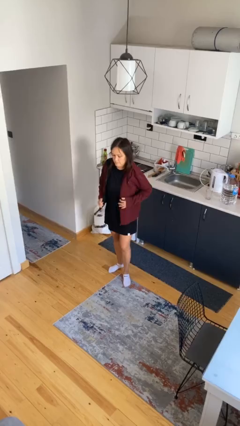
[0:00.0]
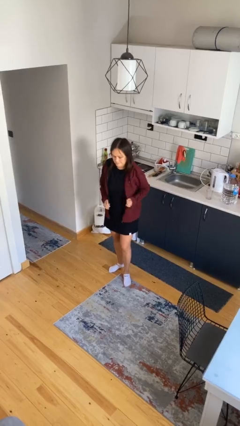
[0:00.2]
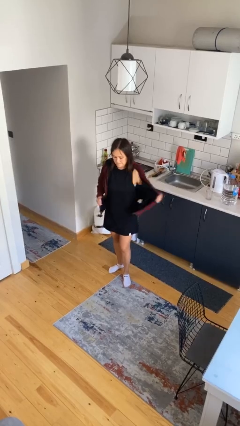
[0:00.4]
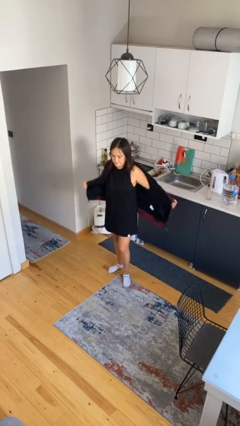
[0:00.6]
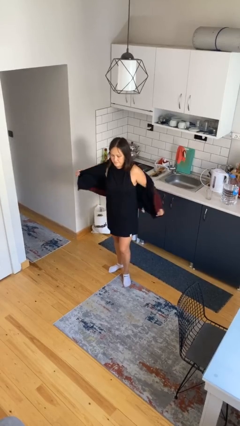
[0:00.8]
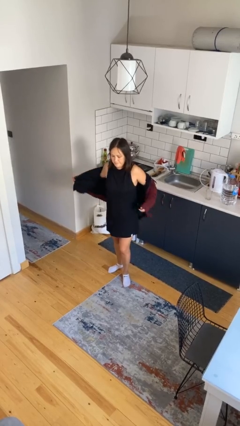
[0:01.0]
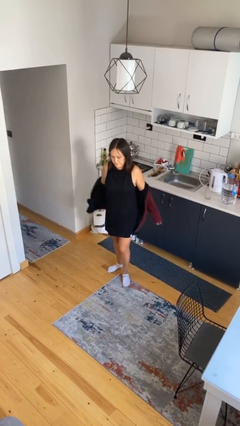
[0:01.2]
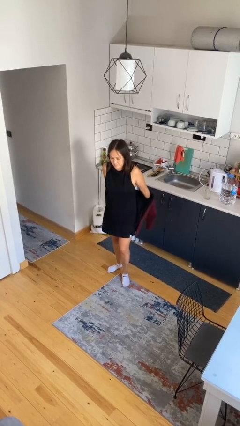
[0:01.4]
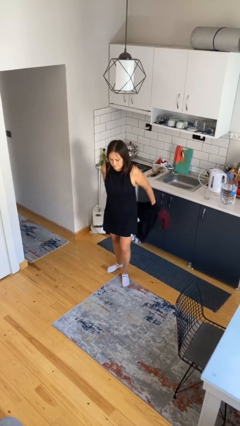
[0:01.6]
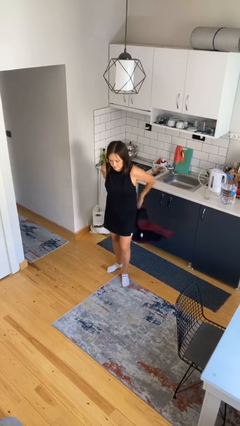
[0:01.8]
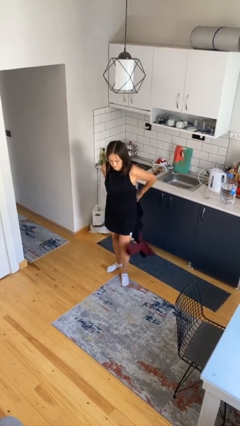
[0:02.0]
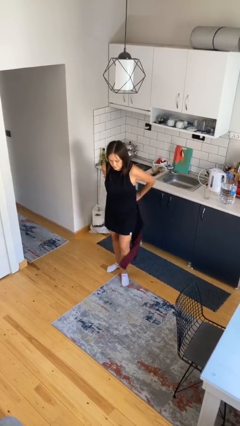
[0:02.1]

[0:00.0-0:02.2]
person takes off jacket

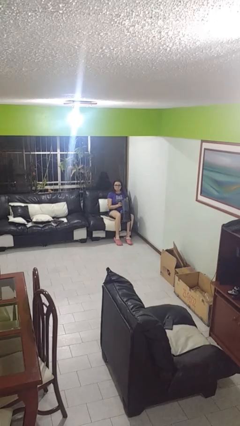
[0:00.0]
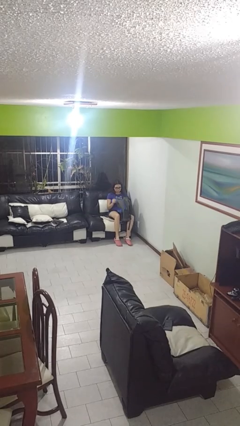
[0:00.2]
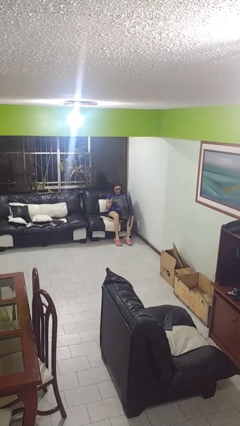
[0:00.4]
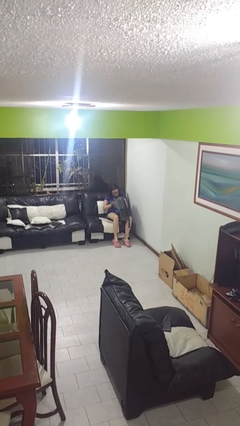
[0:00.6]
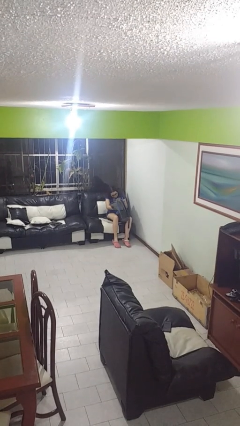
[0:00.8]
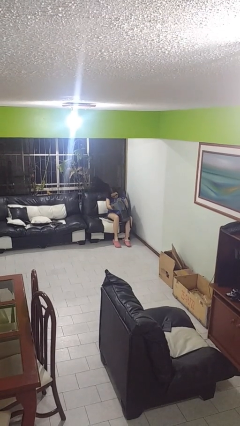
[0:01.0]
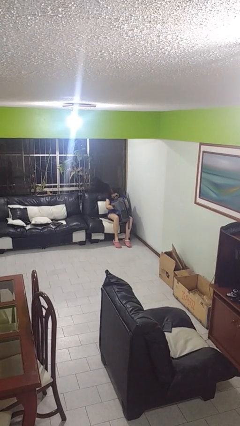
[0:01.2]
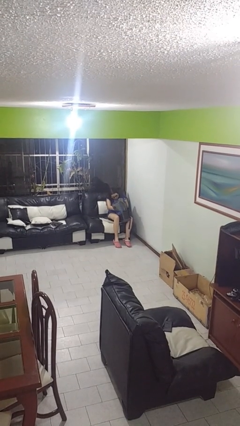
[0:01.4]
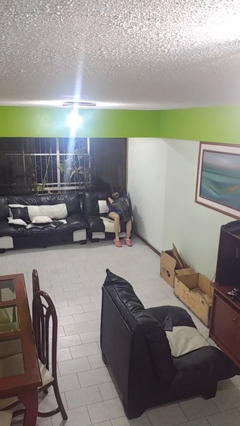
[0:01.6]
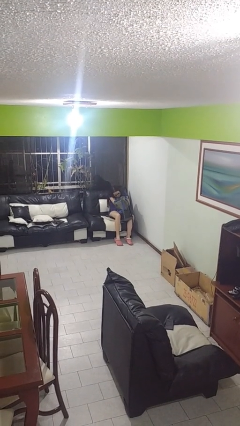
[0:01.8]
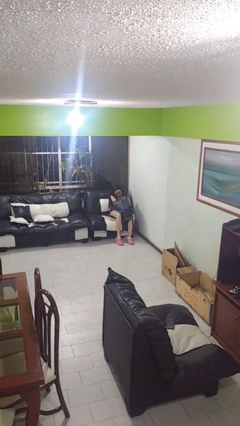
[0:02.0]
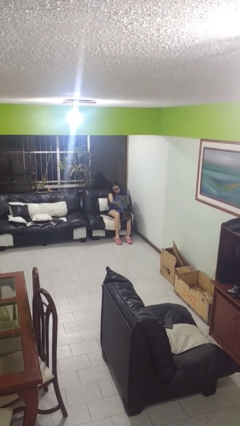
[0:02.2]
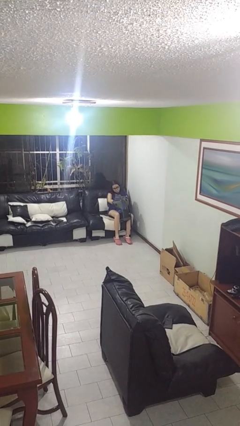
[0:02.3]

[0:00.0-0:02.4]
person searches in backpack

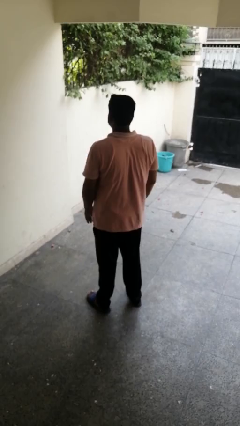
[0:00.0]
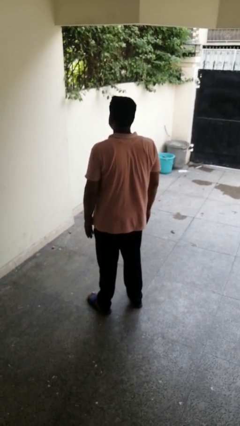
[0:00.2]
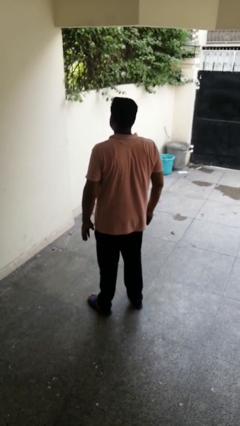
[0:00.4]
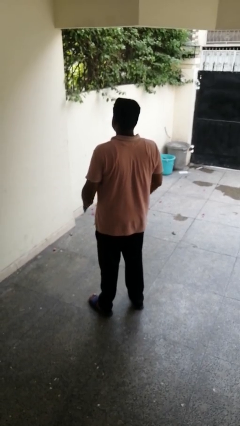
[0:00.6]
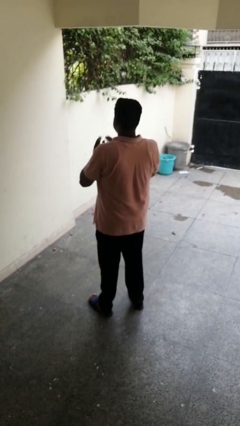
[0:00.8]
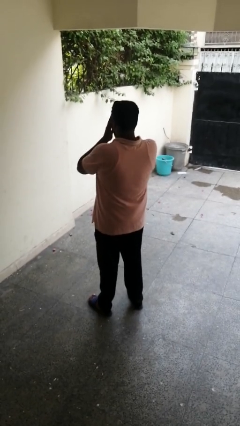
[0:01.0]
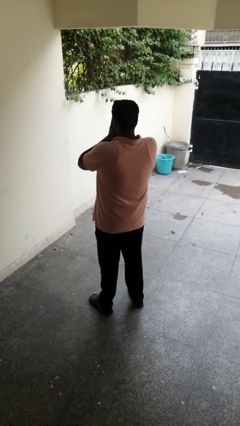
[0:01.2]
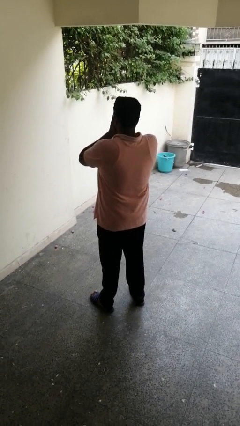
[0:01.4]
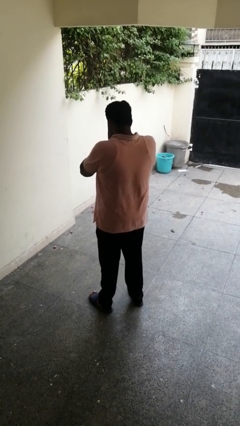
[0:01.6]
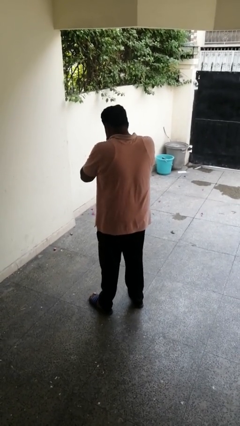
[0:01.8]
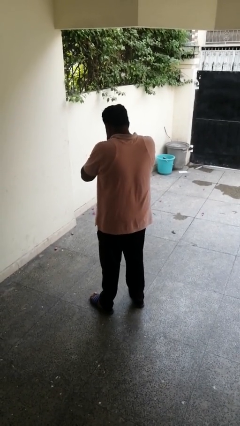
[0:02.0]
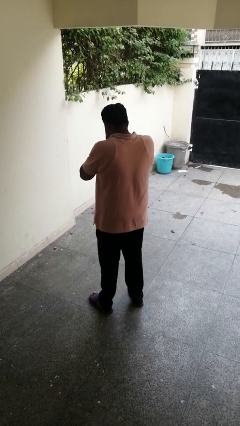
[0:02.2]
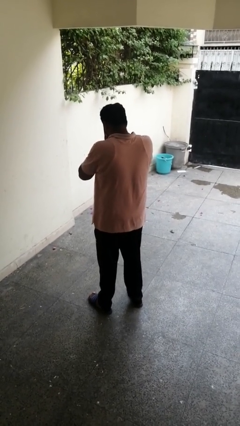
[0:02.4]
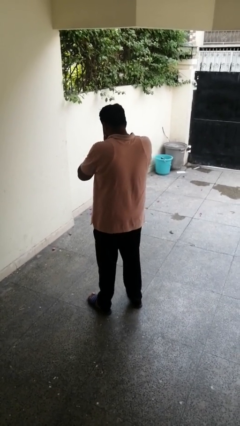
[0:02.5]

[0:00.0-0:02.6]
person sneezes into hand

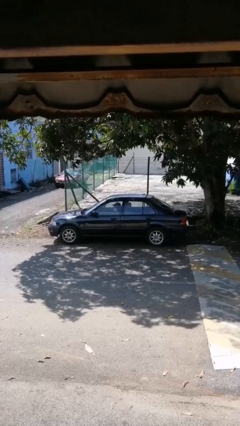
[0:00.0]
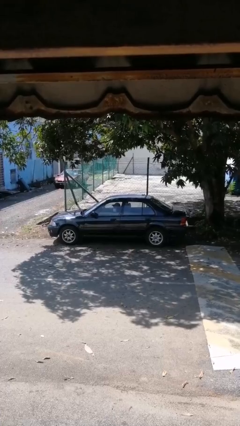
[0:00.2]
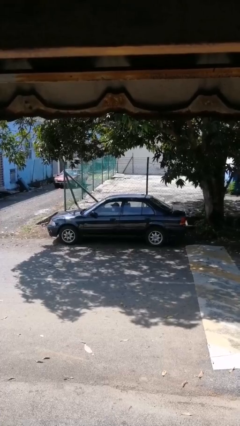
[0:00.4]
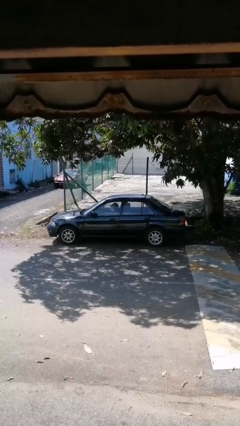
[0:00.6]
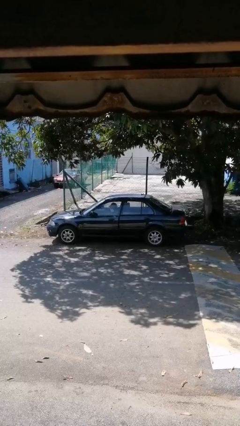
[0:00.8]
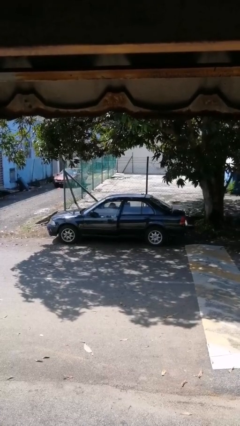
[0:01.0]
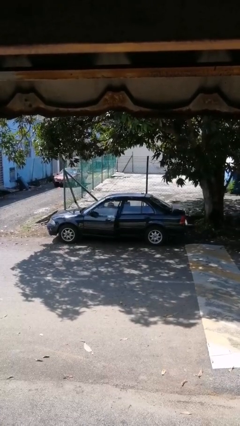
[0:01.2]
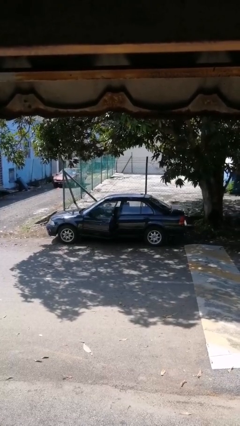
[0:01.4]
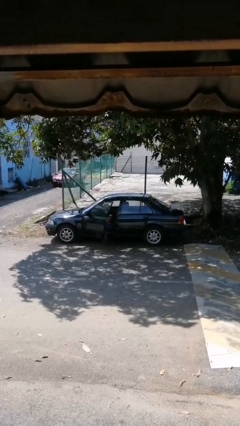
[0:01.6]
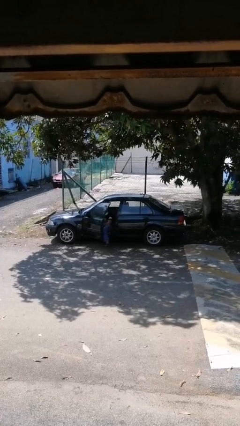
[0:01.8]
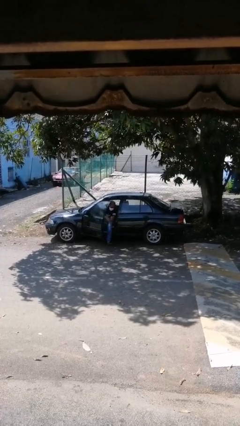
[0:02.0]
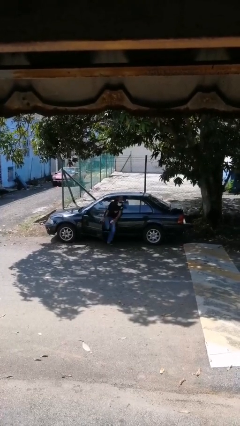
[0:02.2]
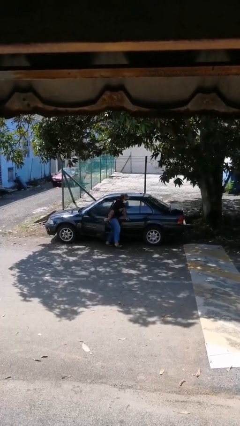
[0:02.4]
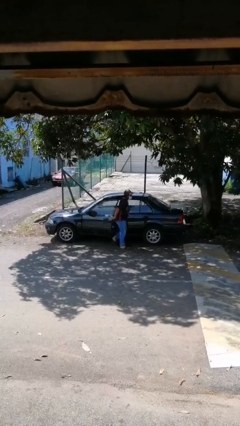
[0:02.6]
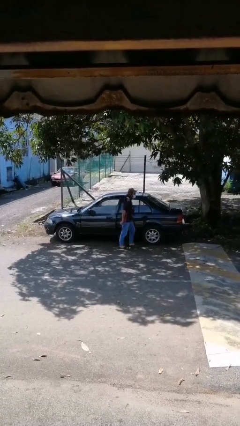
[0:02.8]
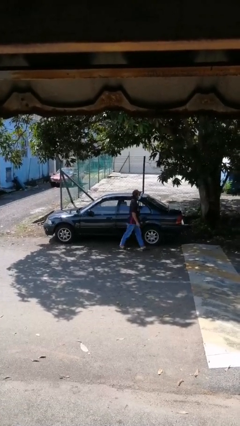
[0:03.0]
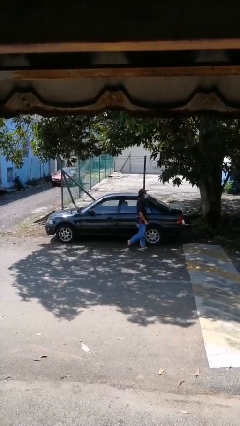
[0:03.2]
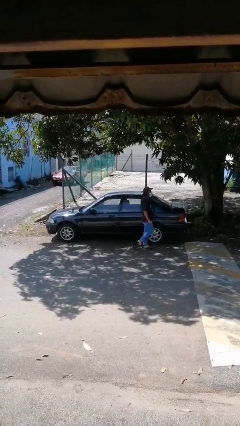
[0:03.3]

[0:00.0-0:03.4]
car drops off person

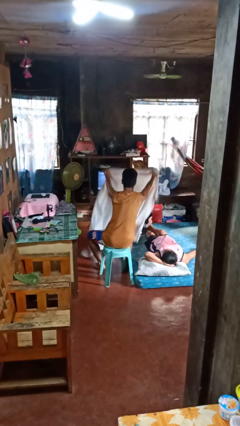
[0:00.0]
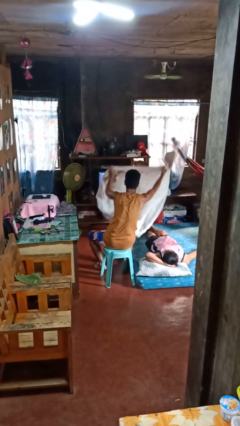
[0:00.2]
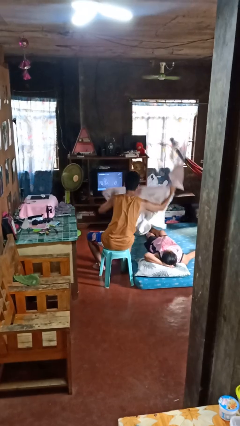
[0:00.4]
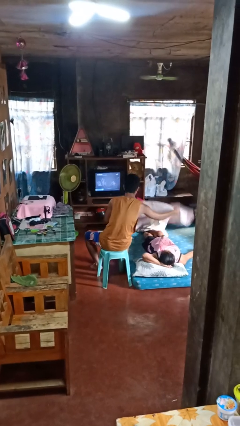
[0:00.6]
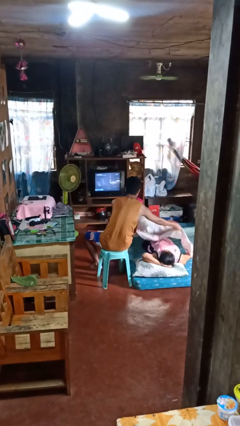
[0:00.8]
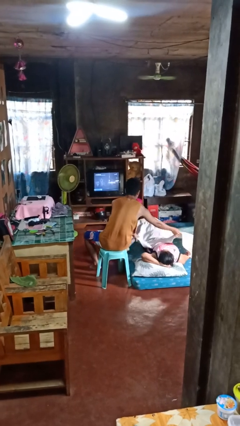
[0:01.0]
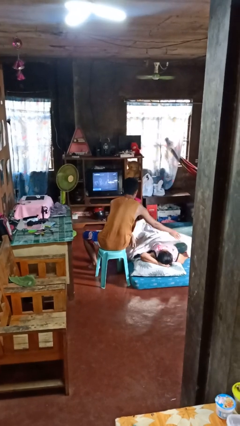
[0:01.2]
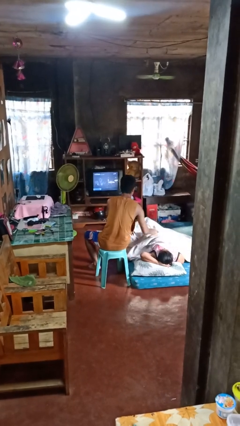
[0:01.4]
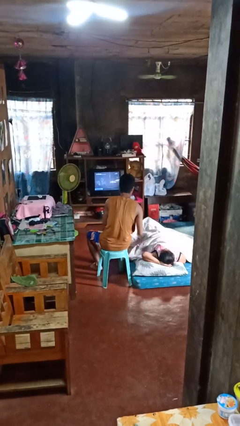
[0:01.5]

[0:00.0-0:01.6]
person covers friend with blanket

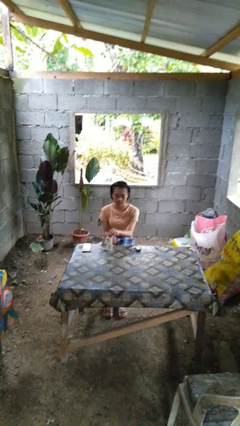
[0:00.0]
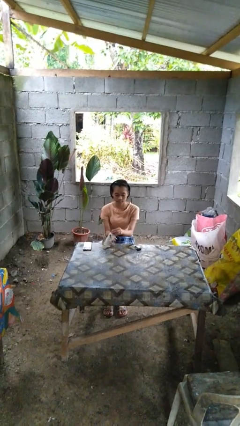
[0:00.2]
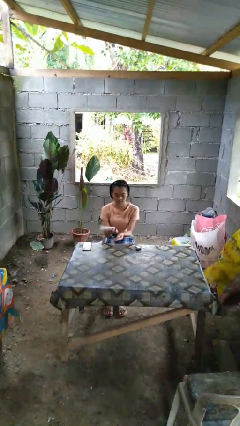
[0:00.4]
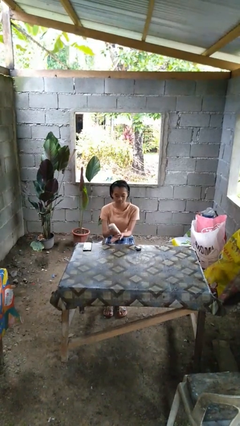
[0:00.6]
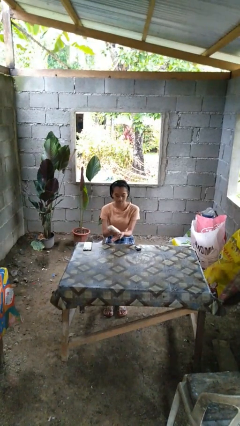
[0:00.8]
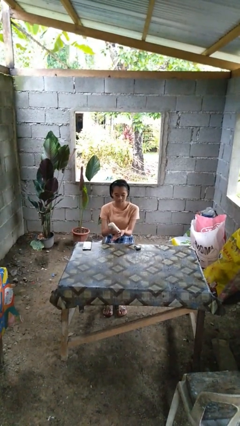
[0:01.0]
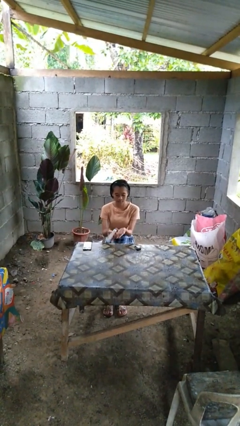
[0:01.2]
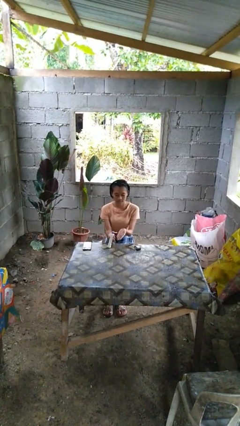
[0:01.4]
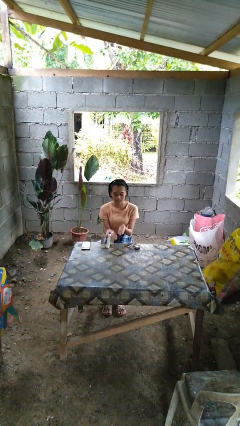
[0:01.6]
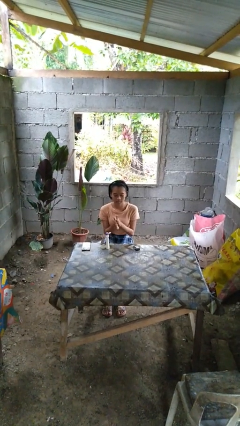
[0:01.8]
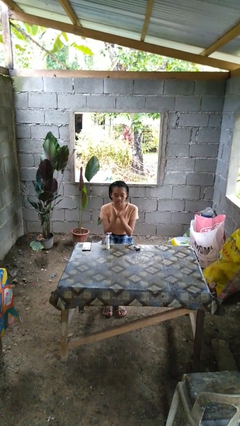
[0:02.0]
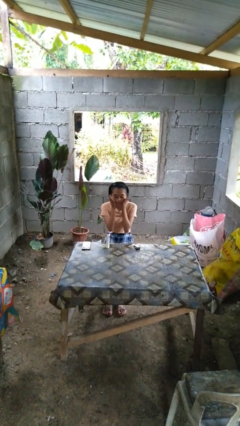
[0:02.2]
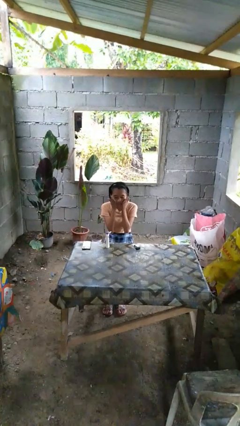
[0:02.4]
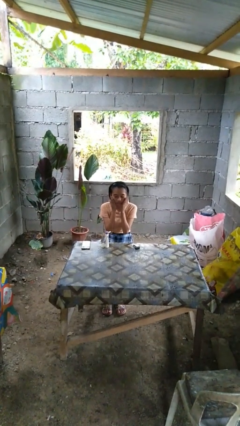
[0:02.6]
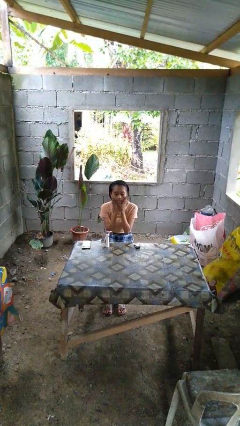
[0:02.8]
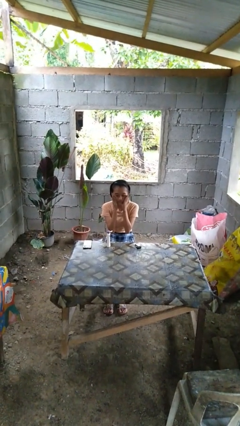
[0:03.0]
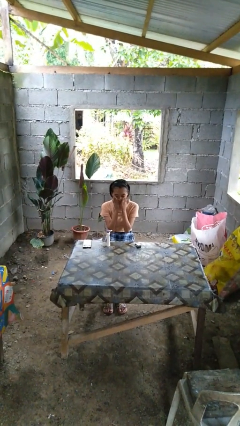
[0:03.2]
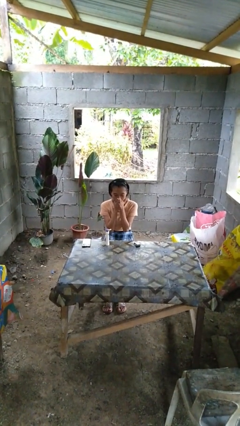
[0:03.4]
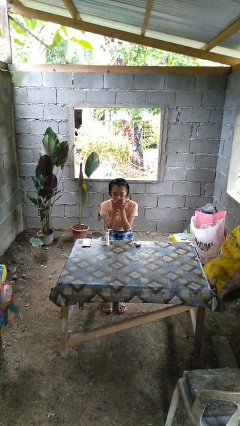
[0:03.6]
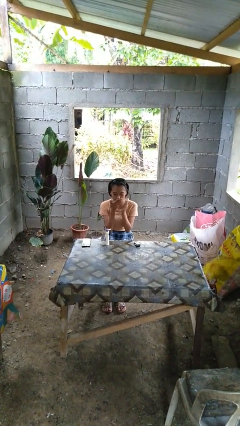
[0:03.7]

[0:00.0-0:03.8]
person applies shaving cream

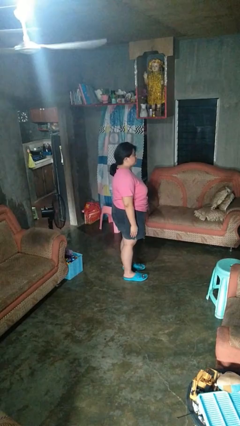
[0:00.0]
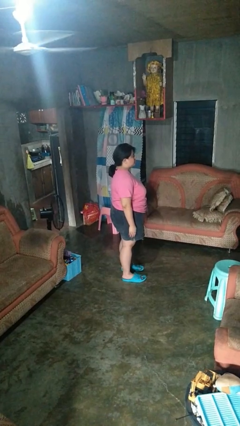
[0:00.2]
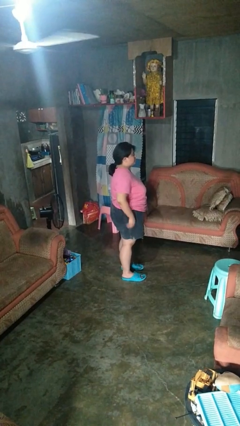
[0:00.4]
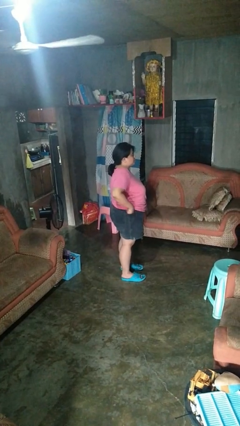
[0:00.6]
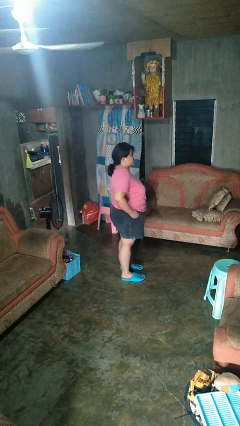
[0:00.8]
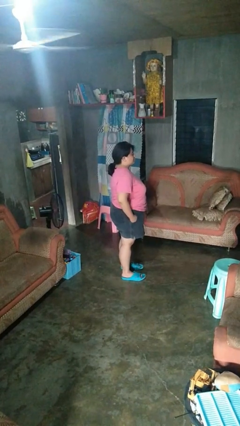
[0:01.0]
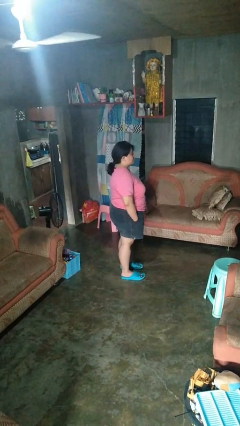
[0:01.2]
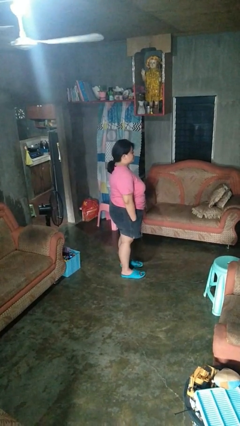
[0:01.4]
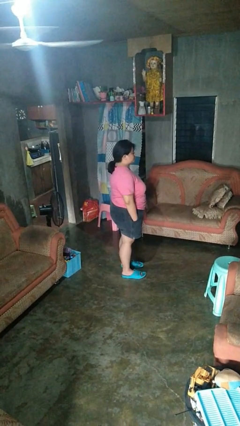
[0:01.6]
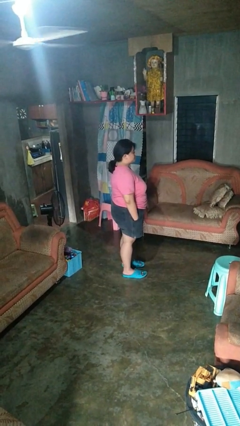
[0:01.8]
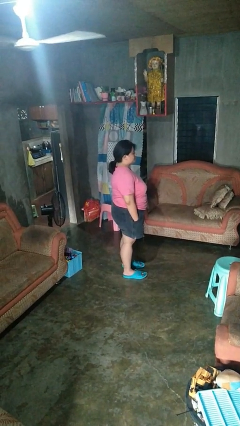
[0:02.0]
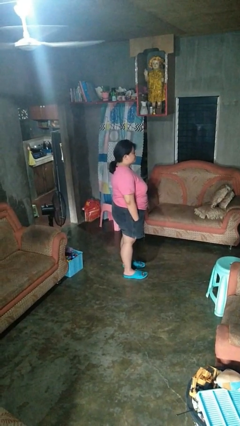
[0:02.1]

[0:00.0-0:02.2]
person puts hands in back pockets
